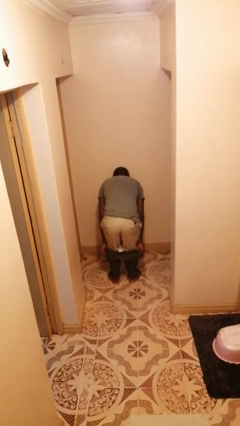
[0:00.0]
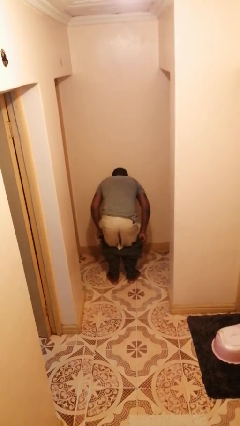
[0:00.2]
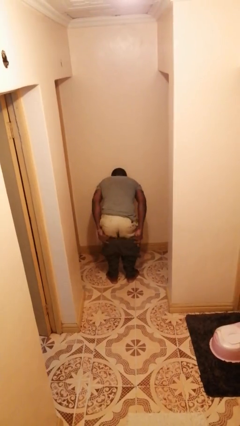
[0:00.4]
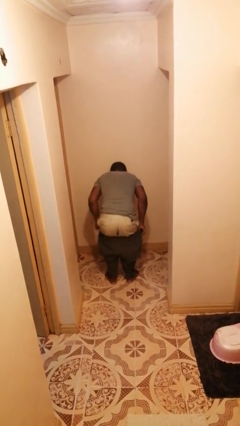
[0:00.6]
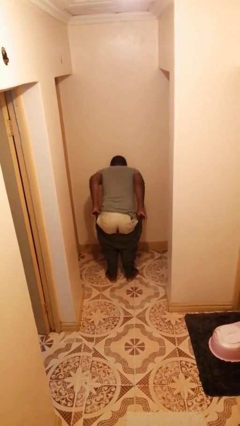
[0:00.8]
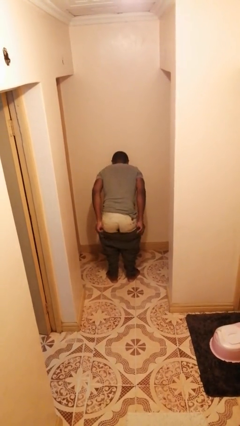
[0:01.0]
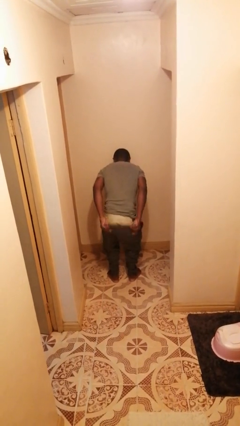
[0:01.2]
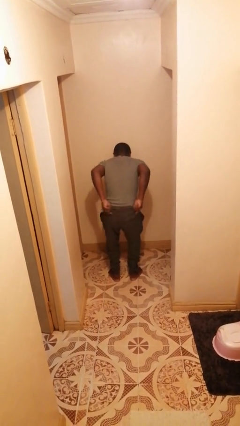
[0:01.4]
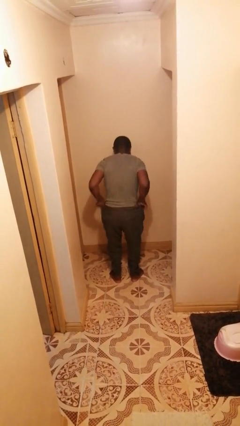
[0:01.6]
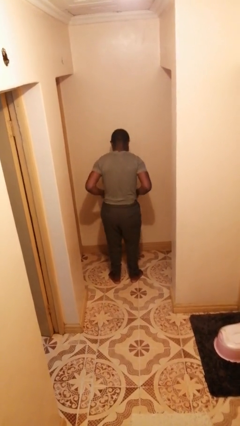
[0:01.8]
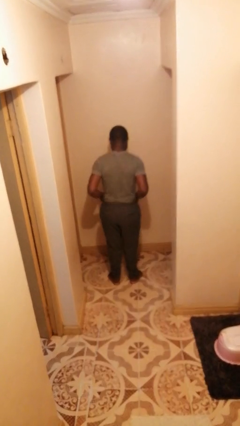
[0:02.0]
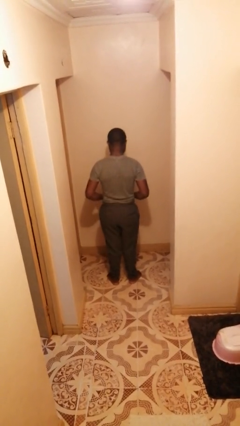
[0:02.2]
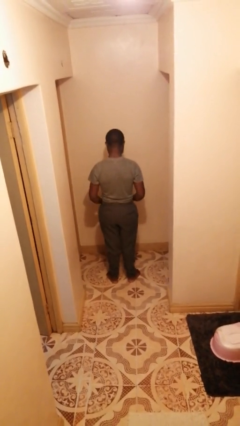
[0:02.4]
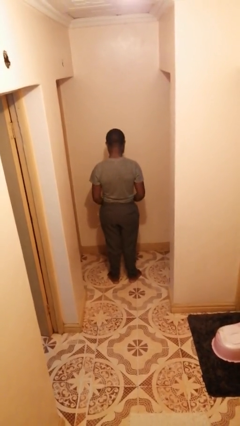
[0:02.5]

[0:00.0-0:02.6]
person puts on pants

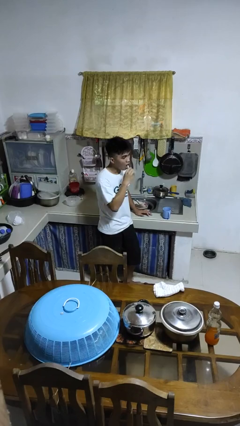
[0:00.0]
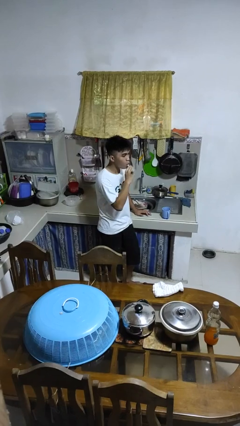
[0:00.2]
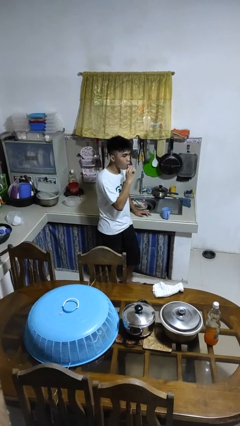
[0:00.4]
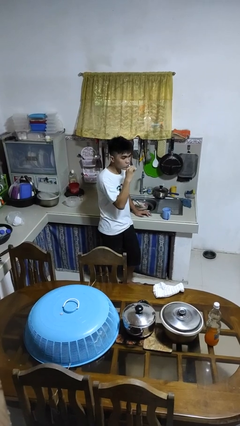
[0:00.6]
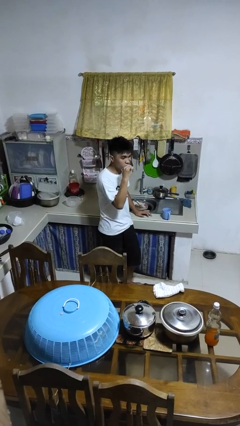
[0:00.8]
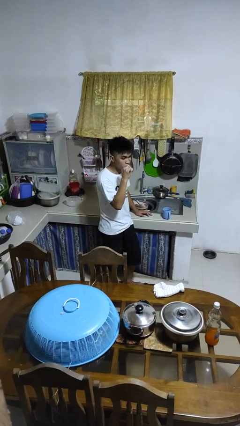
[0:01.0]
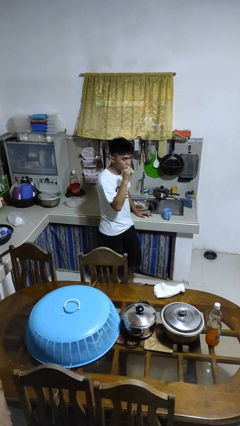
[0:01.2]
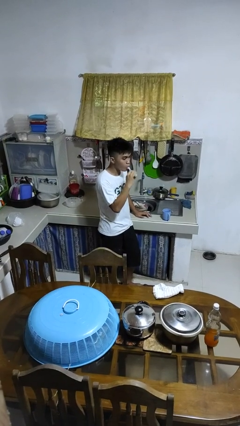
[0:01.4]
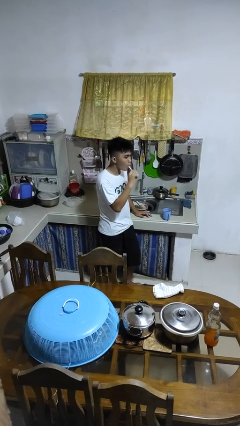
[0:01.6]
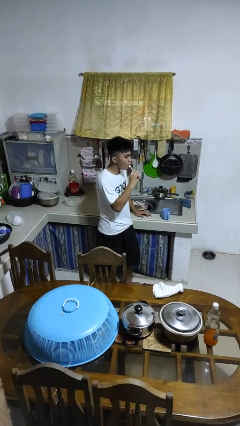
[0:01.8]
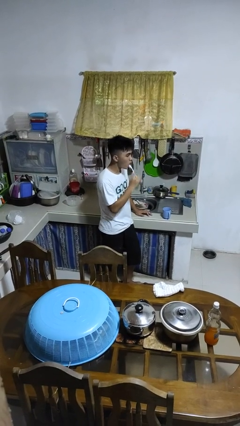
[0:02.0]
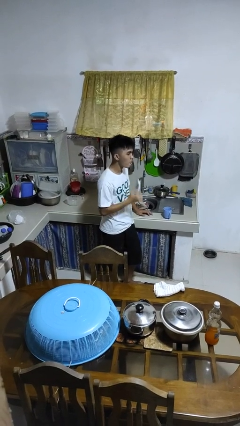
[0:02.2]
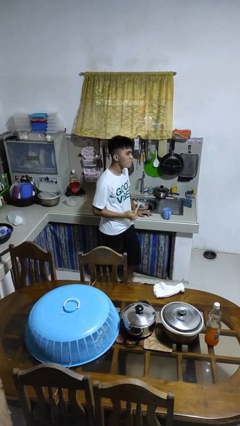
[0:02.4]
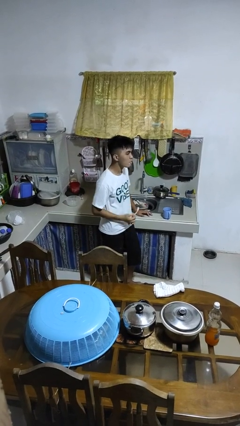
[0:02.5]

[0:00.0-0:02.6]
person brushes teeth

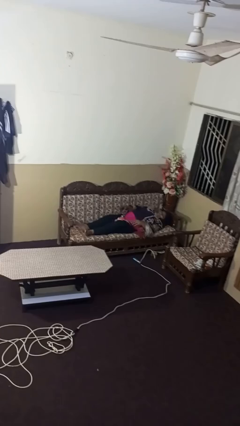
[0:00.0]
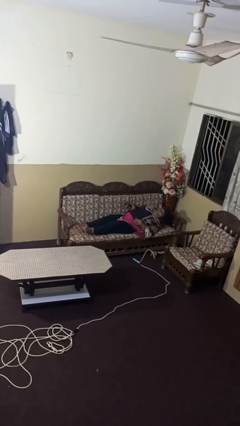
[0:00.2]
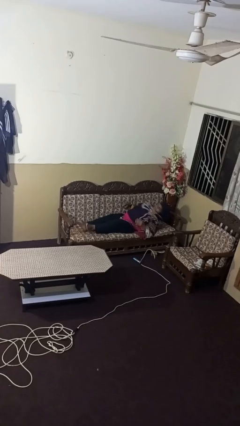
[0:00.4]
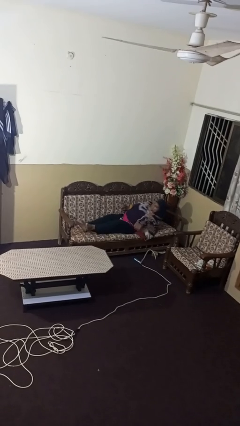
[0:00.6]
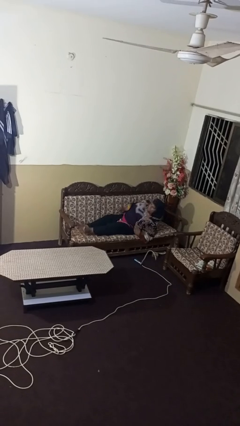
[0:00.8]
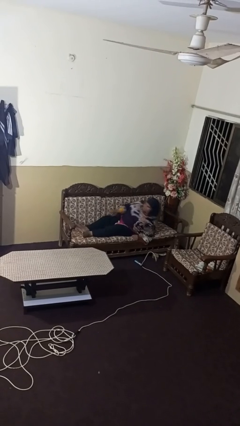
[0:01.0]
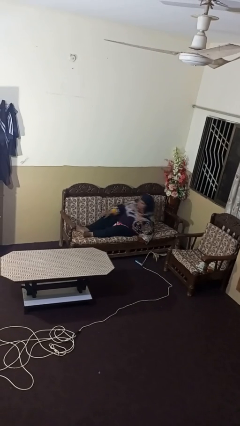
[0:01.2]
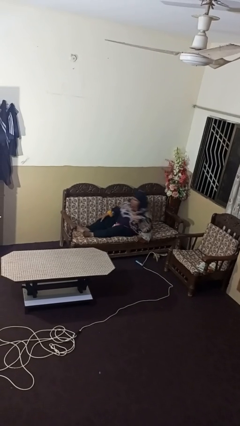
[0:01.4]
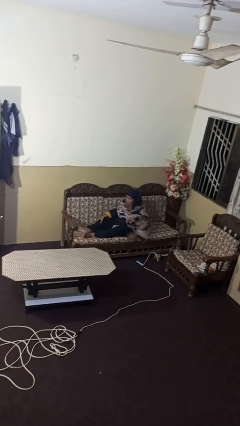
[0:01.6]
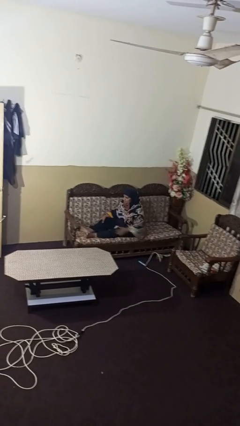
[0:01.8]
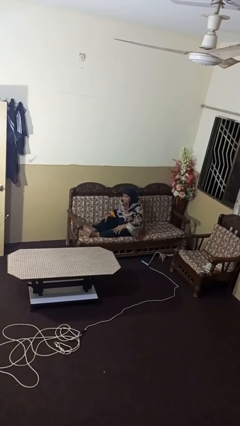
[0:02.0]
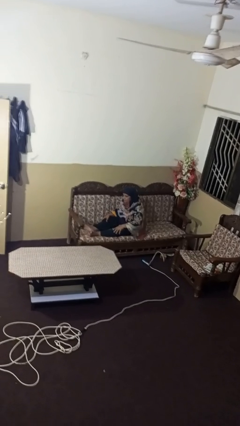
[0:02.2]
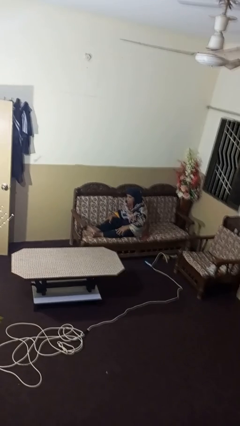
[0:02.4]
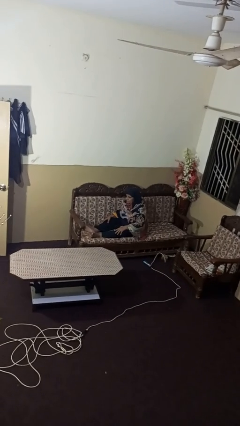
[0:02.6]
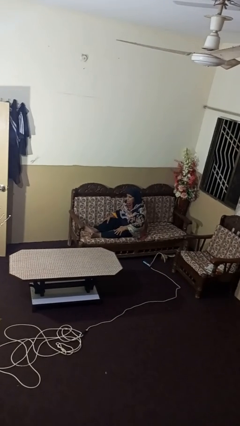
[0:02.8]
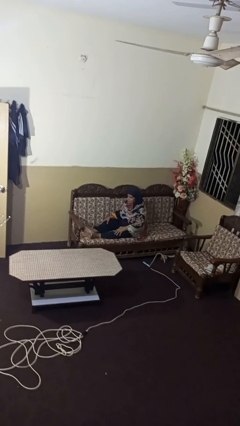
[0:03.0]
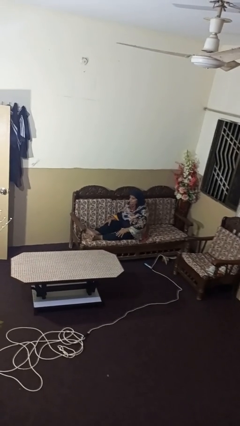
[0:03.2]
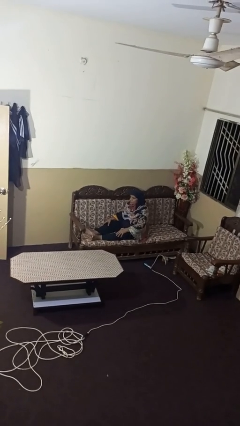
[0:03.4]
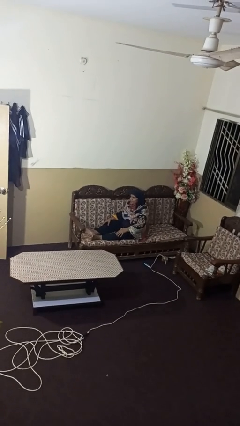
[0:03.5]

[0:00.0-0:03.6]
person stands up

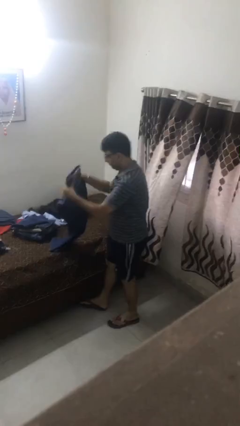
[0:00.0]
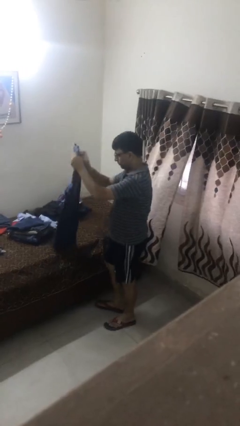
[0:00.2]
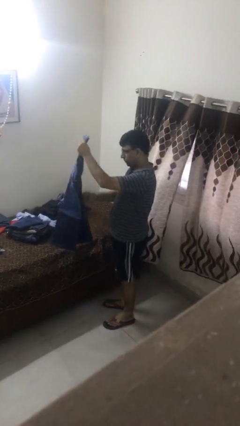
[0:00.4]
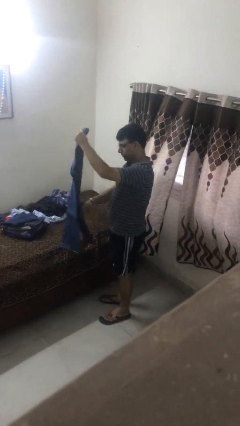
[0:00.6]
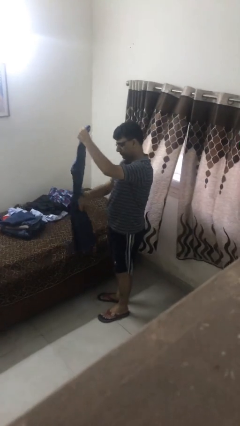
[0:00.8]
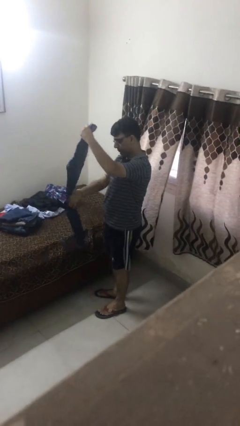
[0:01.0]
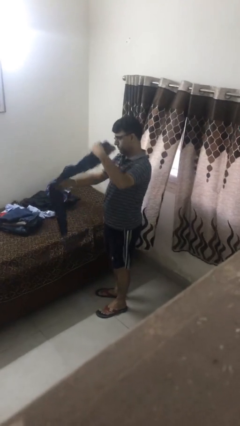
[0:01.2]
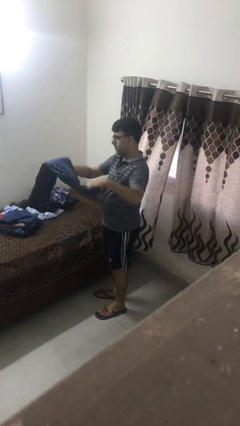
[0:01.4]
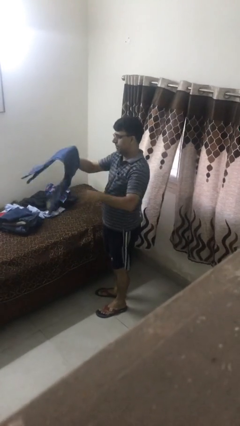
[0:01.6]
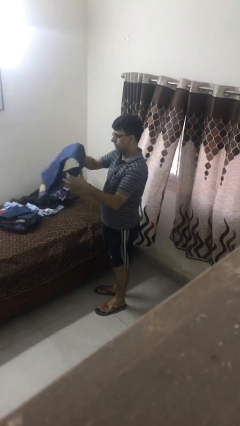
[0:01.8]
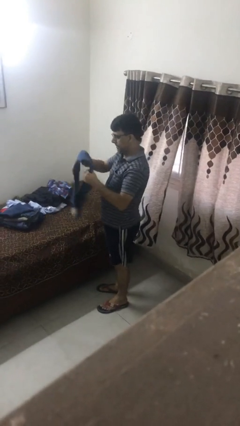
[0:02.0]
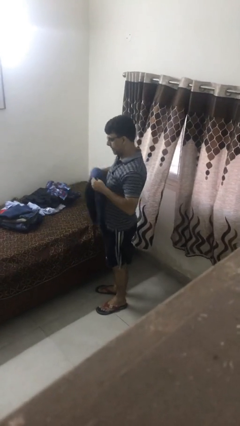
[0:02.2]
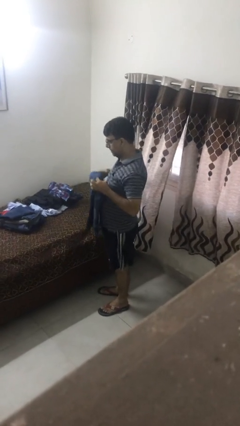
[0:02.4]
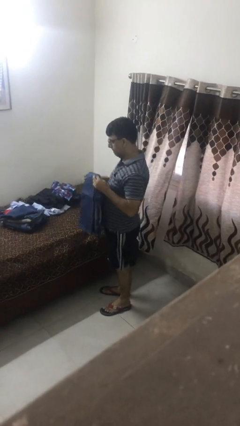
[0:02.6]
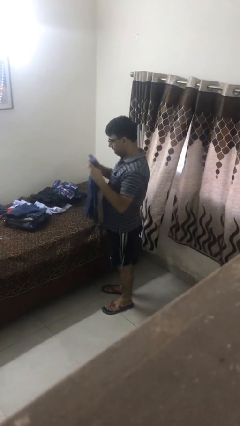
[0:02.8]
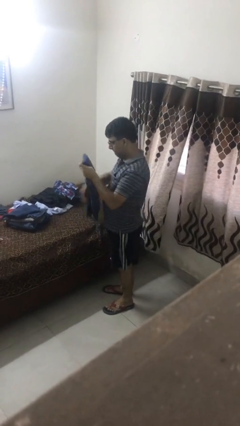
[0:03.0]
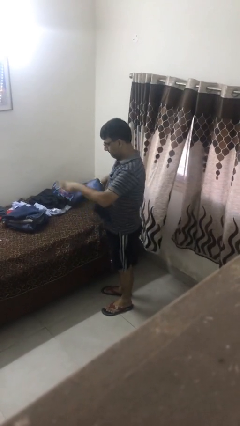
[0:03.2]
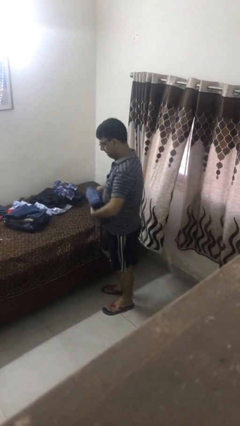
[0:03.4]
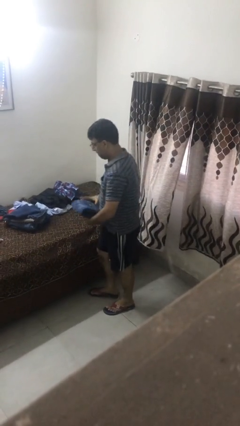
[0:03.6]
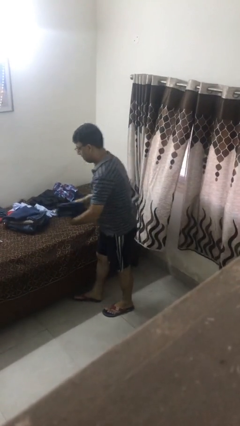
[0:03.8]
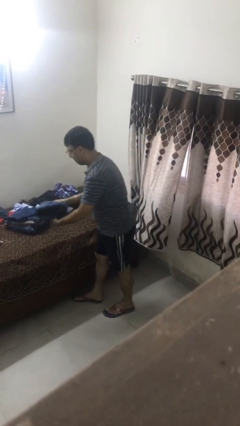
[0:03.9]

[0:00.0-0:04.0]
person folds pants

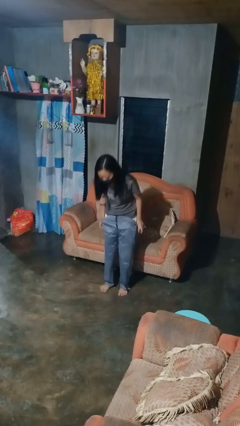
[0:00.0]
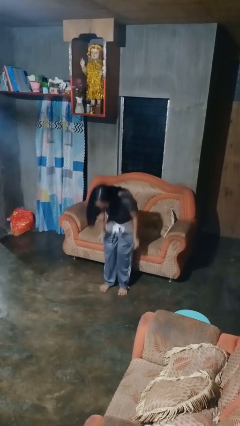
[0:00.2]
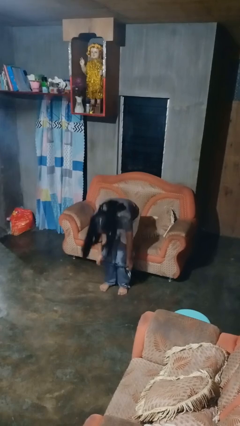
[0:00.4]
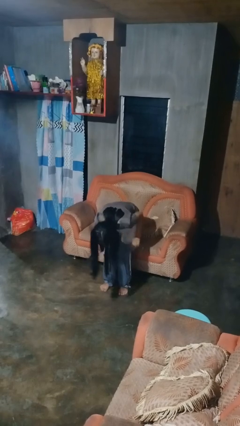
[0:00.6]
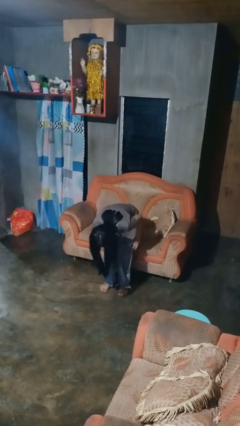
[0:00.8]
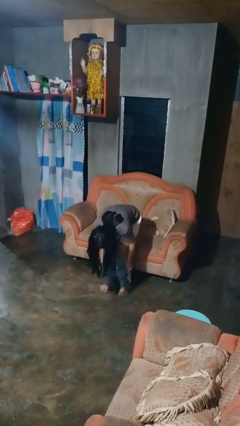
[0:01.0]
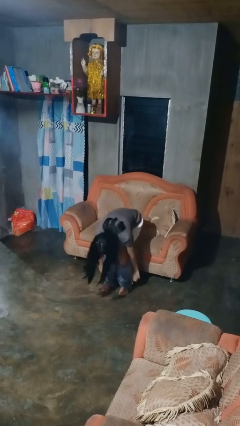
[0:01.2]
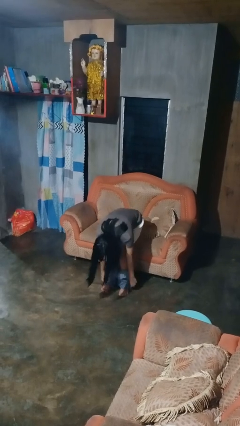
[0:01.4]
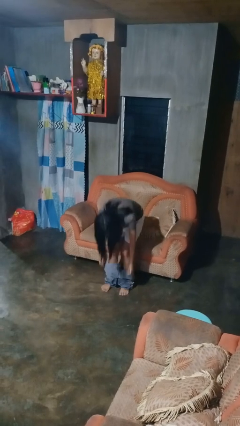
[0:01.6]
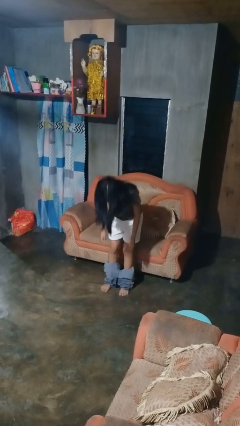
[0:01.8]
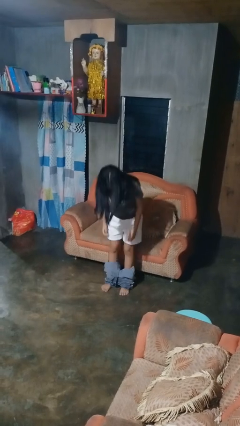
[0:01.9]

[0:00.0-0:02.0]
person takes off pants

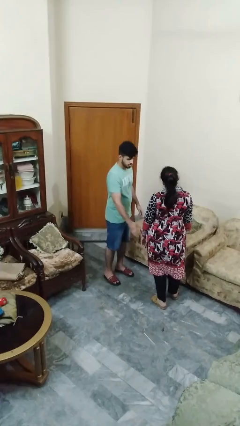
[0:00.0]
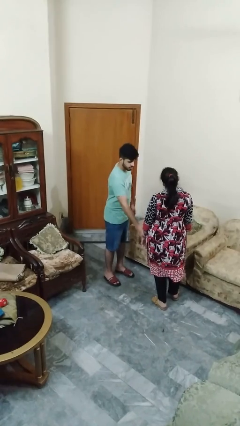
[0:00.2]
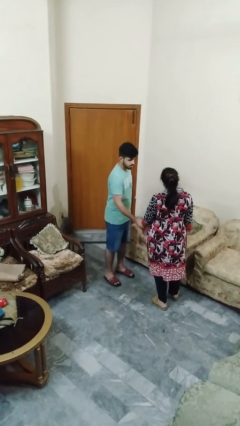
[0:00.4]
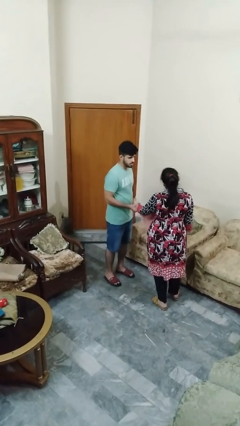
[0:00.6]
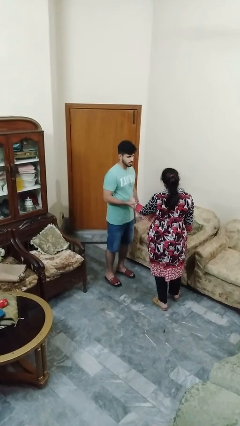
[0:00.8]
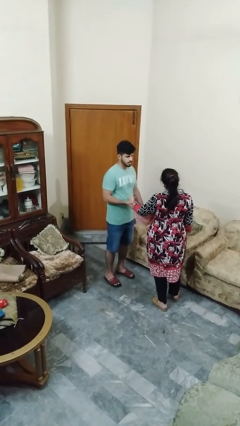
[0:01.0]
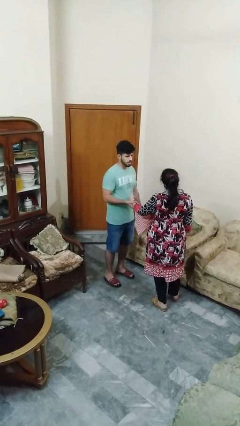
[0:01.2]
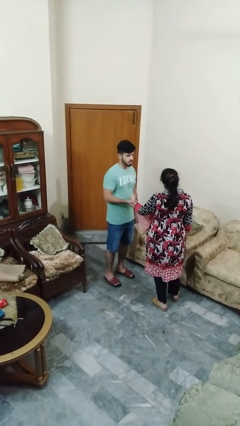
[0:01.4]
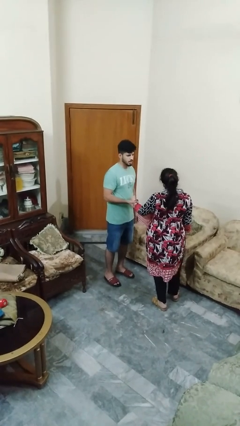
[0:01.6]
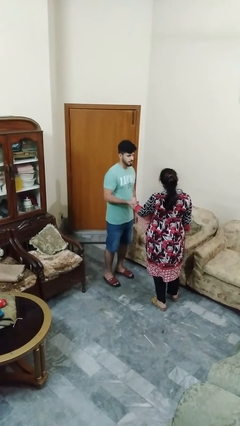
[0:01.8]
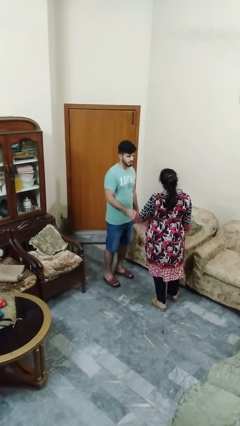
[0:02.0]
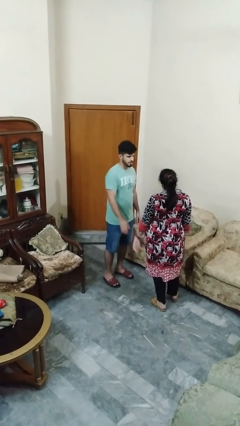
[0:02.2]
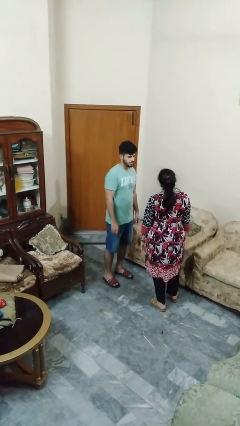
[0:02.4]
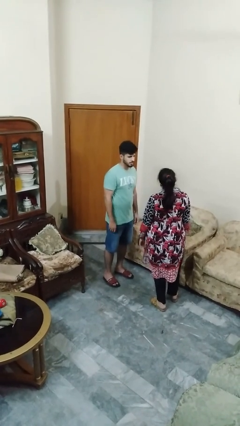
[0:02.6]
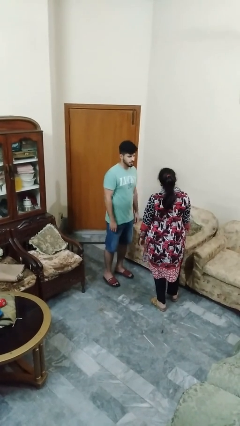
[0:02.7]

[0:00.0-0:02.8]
person grabs person by forearm
